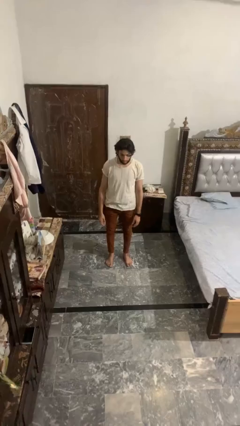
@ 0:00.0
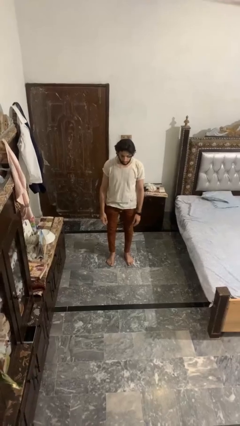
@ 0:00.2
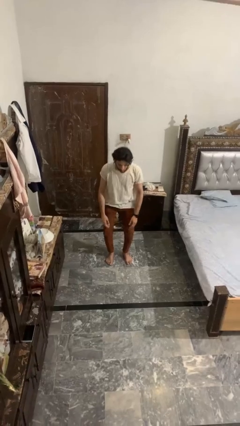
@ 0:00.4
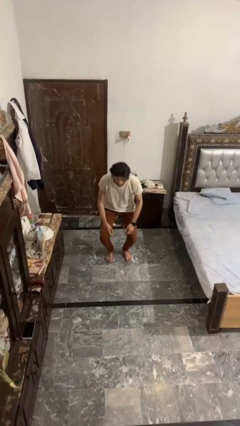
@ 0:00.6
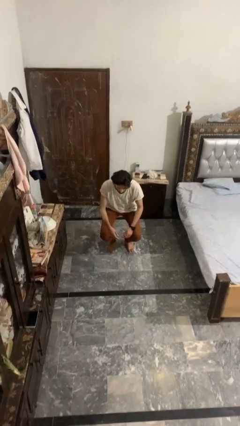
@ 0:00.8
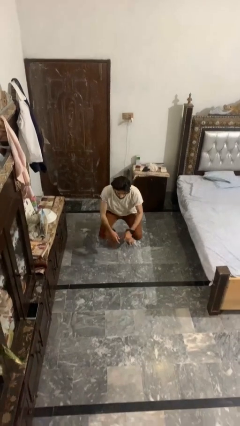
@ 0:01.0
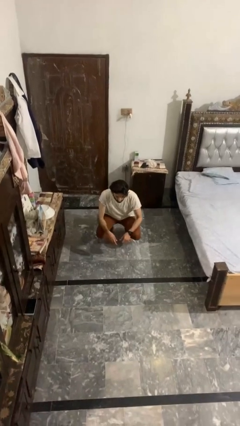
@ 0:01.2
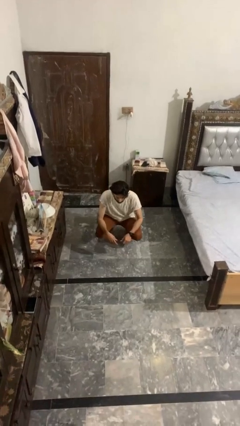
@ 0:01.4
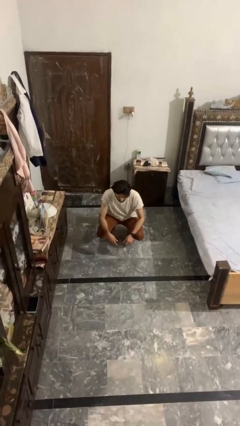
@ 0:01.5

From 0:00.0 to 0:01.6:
person squats

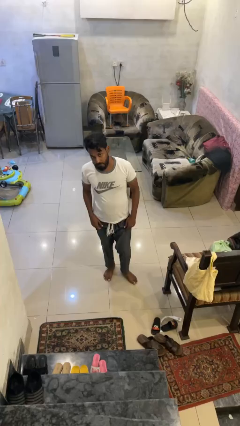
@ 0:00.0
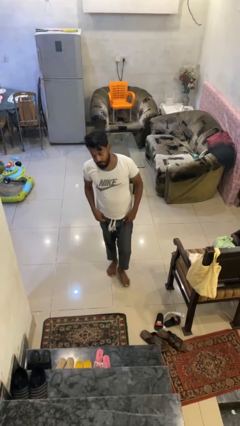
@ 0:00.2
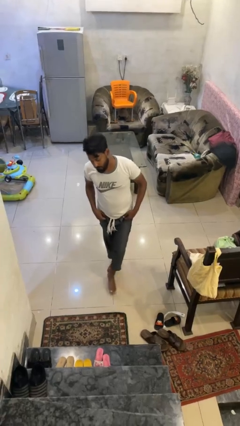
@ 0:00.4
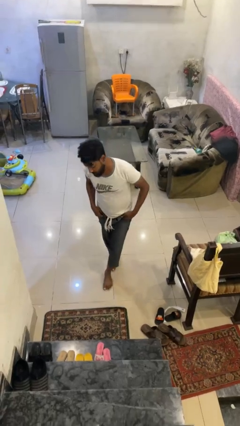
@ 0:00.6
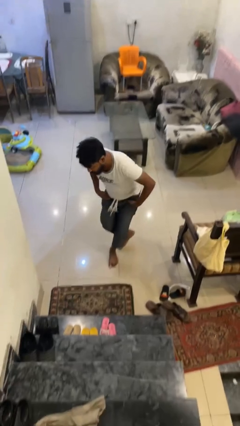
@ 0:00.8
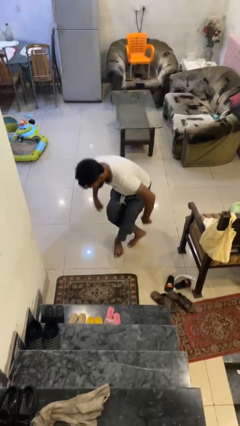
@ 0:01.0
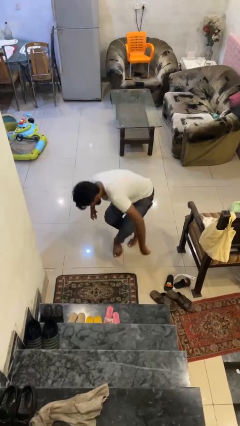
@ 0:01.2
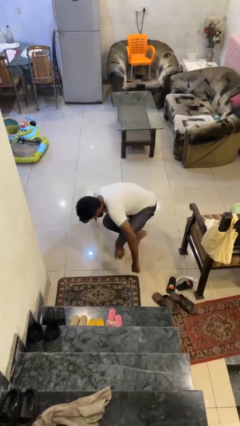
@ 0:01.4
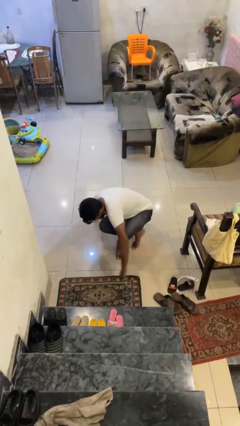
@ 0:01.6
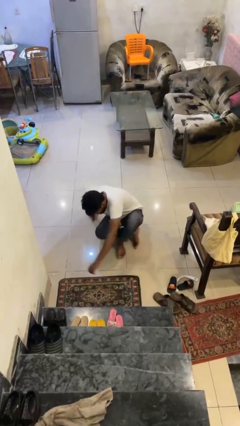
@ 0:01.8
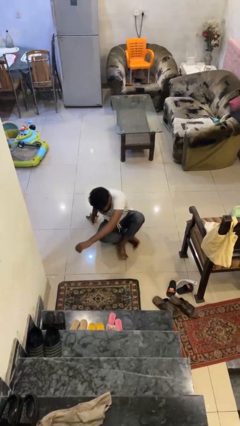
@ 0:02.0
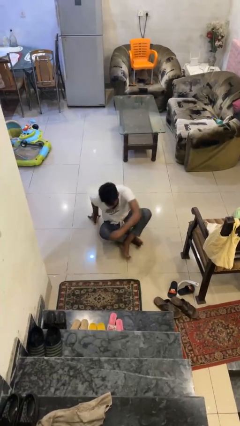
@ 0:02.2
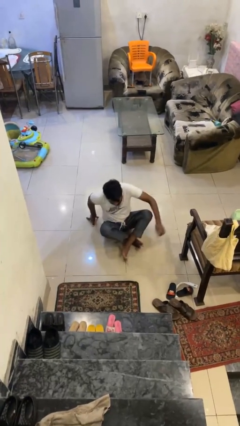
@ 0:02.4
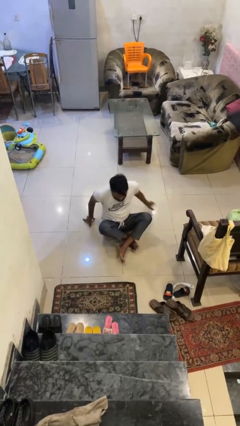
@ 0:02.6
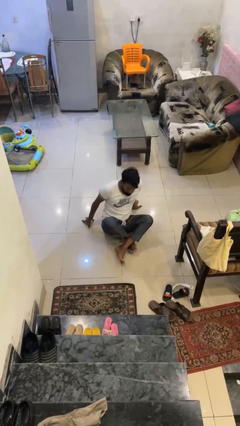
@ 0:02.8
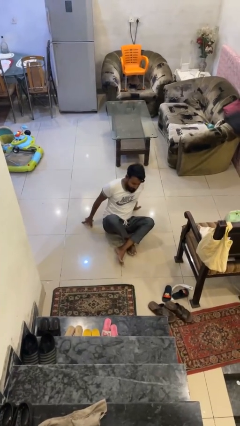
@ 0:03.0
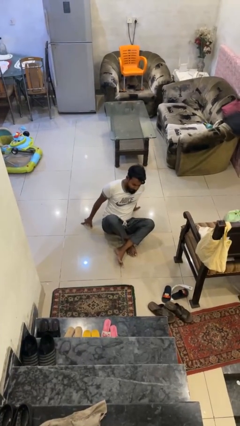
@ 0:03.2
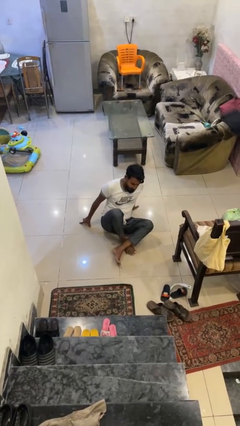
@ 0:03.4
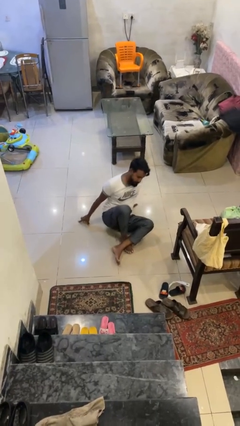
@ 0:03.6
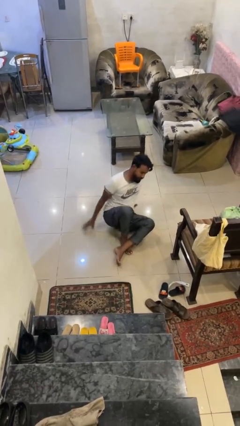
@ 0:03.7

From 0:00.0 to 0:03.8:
person sits crisscross

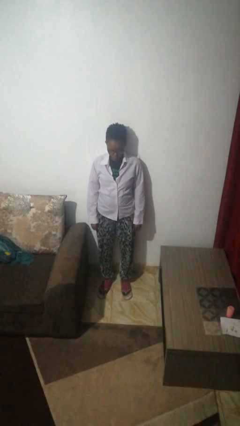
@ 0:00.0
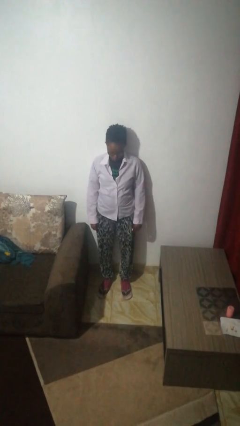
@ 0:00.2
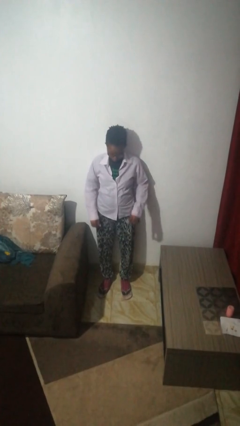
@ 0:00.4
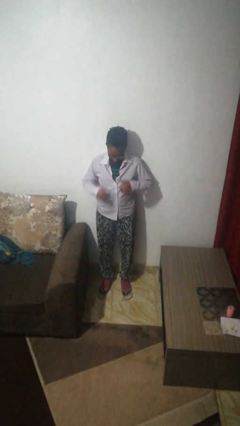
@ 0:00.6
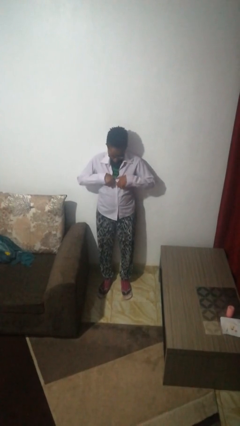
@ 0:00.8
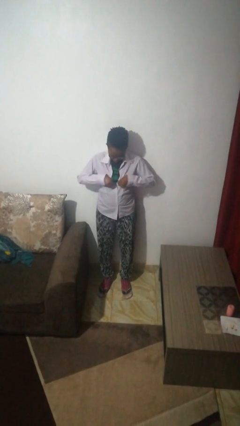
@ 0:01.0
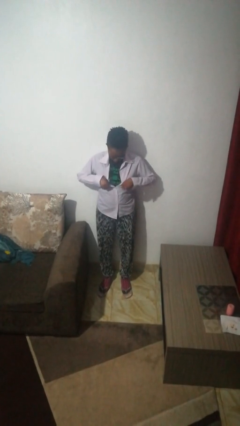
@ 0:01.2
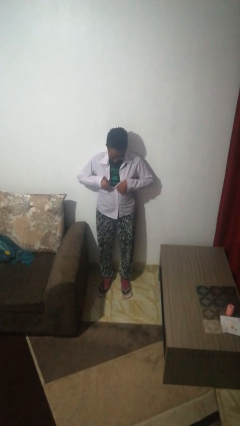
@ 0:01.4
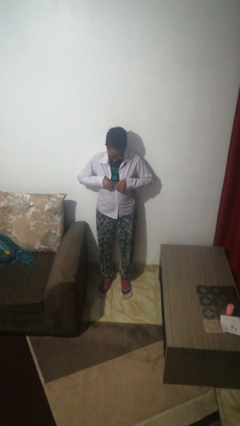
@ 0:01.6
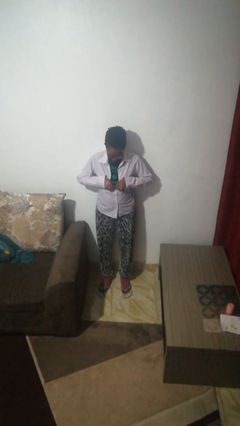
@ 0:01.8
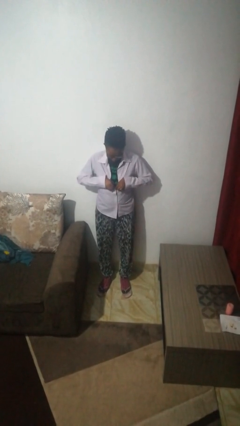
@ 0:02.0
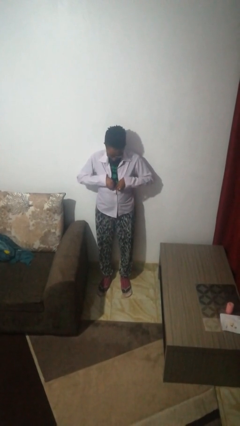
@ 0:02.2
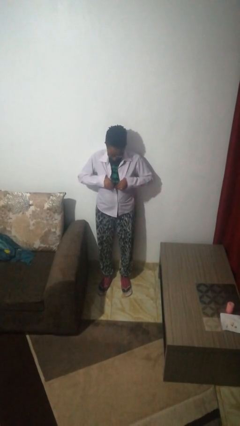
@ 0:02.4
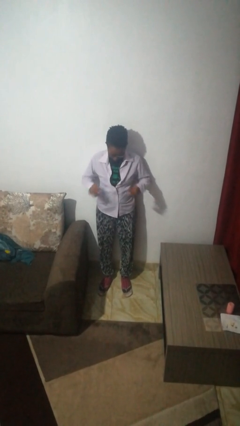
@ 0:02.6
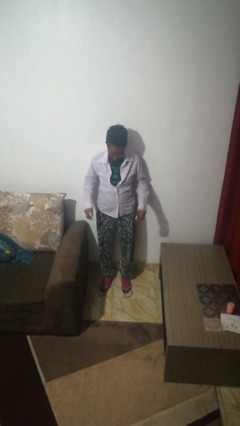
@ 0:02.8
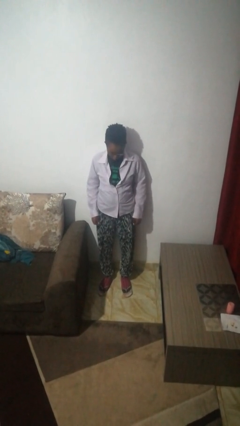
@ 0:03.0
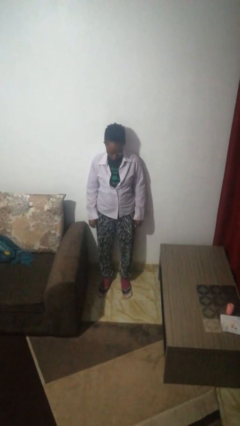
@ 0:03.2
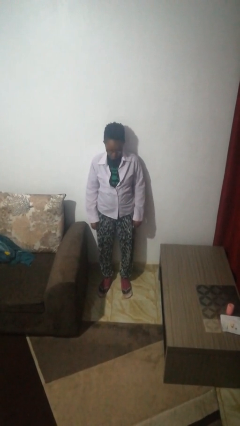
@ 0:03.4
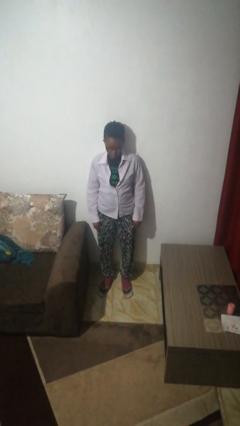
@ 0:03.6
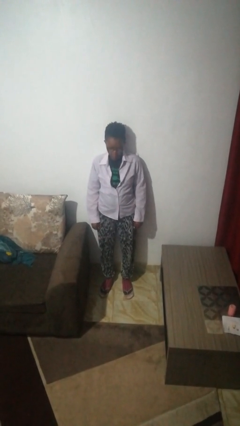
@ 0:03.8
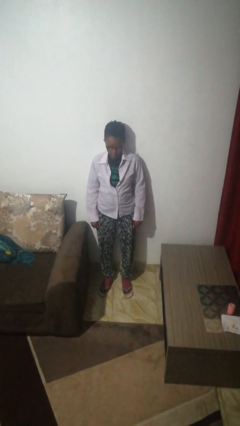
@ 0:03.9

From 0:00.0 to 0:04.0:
person unbuttons shirt

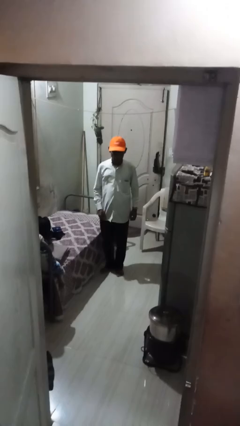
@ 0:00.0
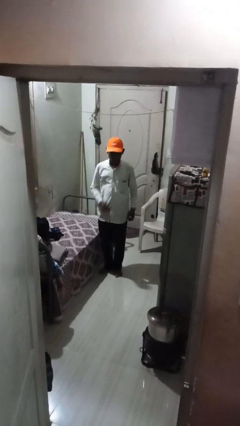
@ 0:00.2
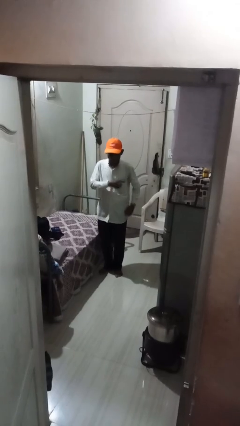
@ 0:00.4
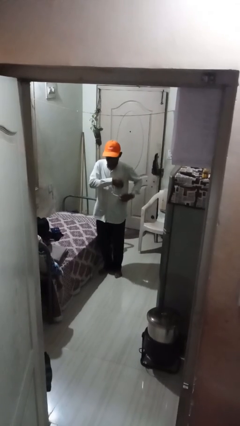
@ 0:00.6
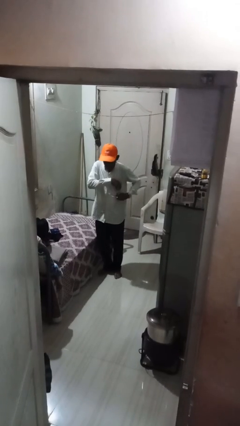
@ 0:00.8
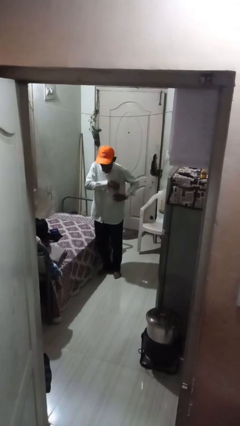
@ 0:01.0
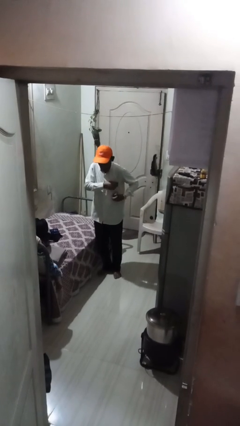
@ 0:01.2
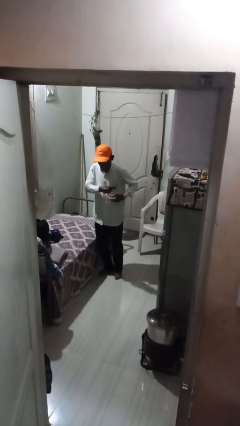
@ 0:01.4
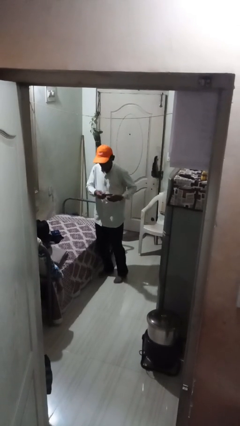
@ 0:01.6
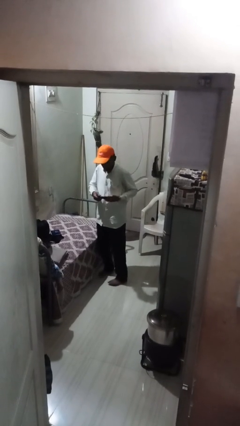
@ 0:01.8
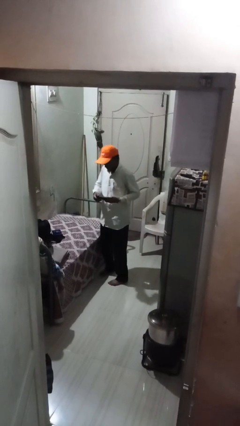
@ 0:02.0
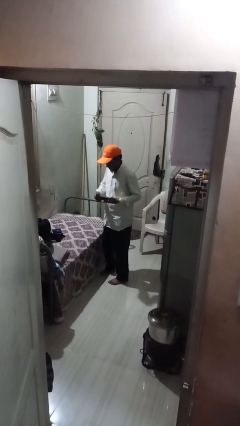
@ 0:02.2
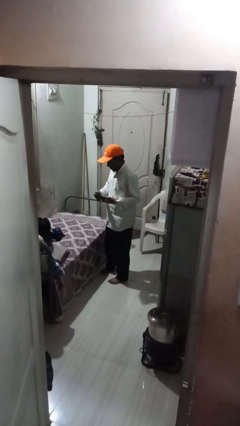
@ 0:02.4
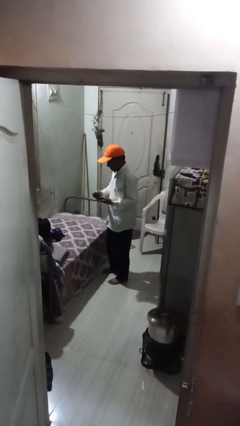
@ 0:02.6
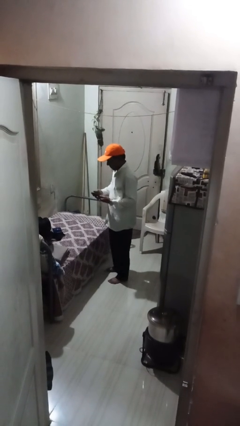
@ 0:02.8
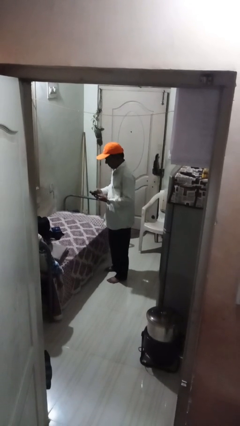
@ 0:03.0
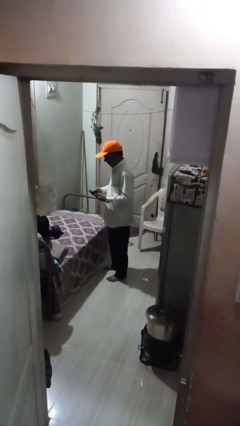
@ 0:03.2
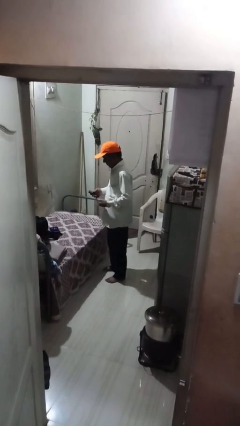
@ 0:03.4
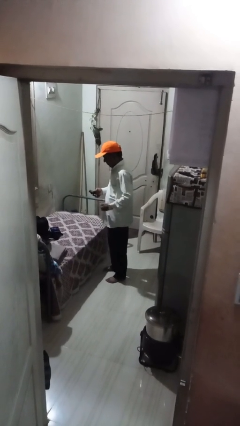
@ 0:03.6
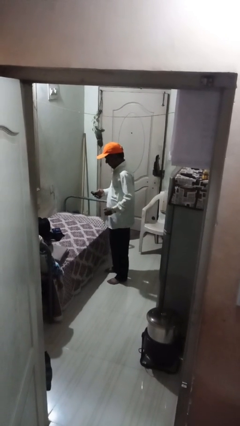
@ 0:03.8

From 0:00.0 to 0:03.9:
person takes phone from pocket

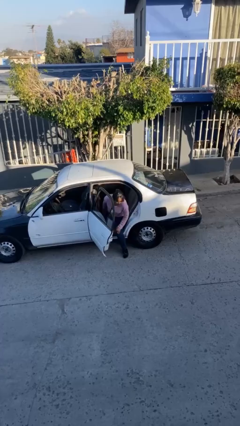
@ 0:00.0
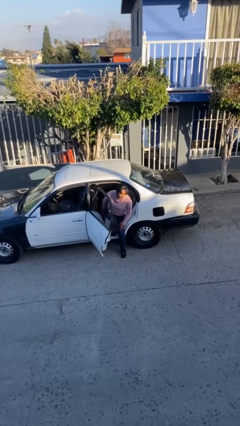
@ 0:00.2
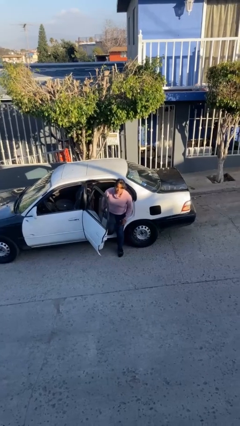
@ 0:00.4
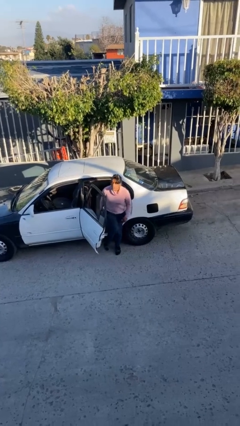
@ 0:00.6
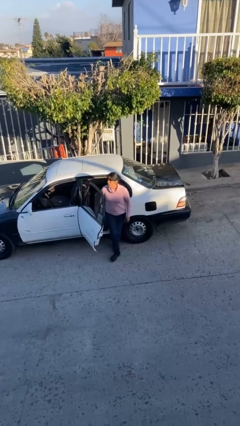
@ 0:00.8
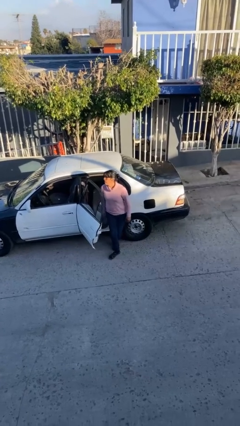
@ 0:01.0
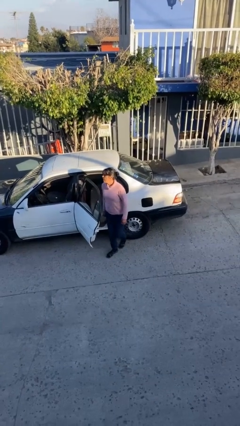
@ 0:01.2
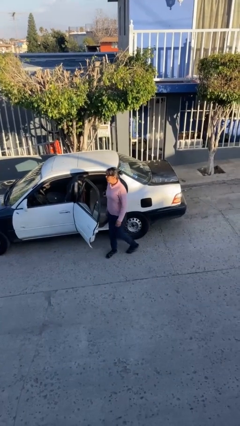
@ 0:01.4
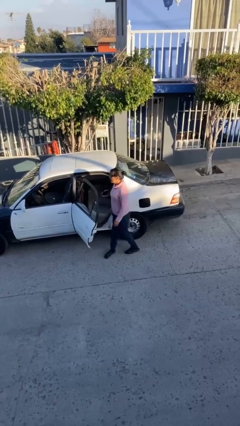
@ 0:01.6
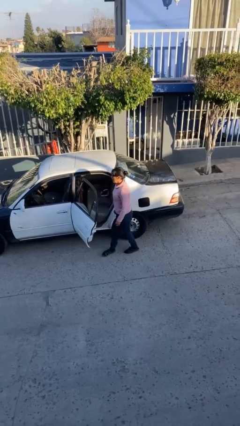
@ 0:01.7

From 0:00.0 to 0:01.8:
person exits car

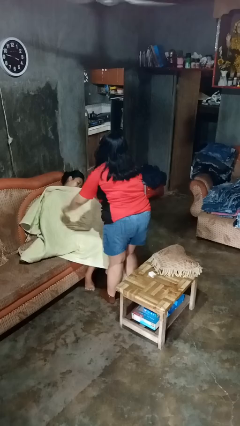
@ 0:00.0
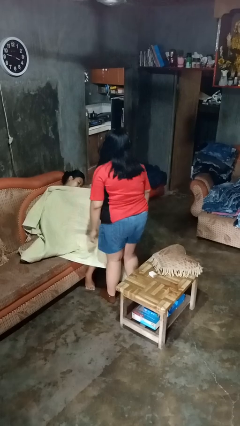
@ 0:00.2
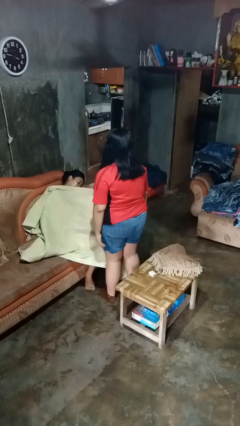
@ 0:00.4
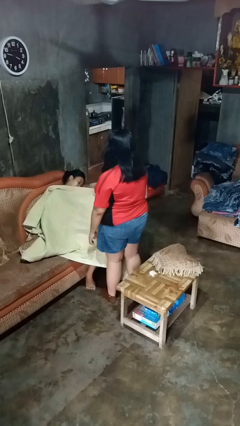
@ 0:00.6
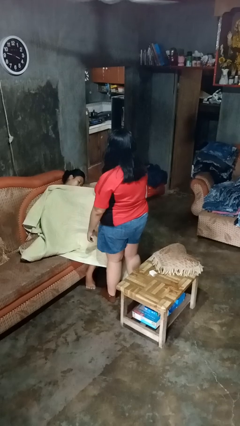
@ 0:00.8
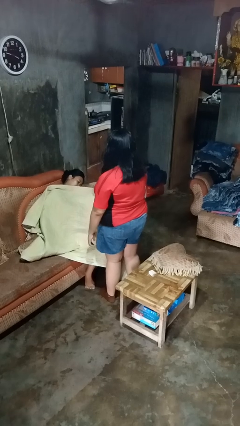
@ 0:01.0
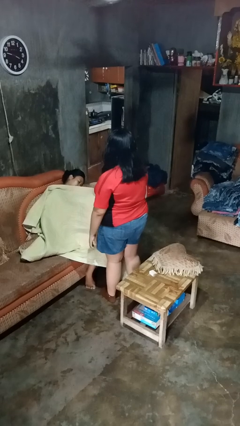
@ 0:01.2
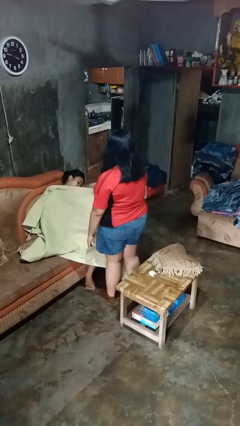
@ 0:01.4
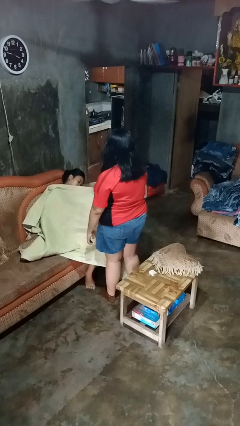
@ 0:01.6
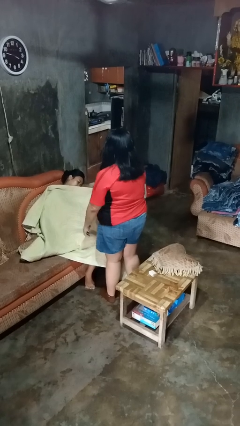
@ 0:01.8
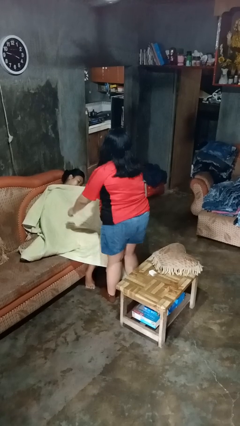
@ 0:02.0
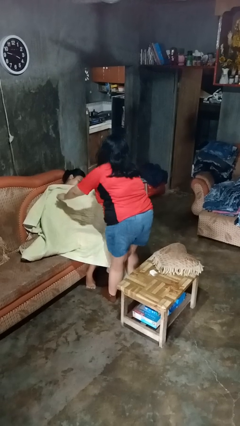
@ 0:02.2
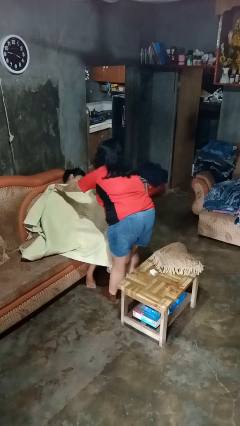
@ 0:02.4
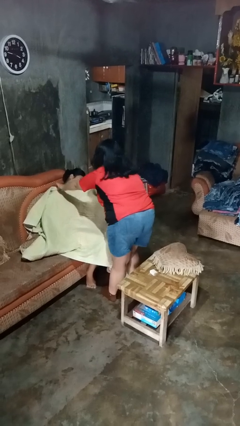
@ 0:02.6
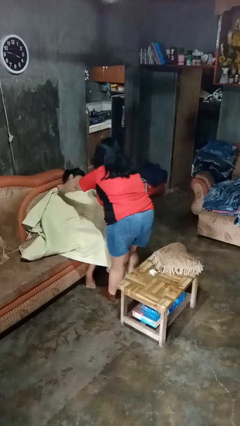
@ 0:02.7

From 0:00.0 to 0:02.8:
person covers friend with blanket
